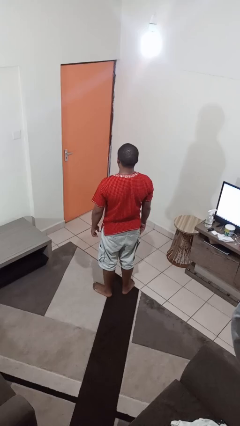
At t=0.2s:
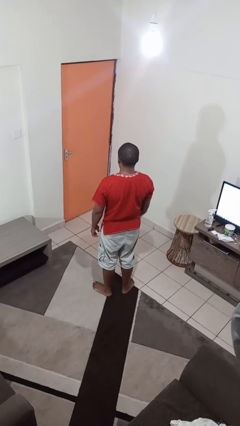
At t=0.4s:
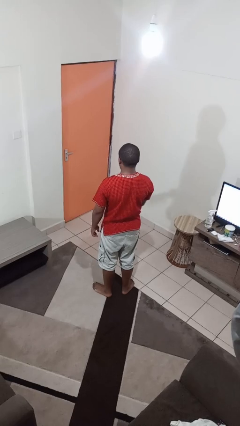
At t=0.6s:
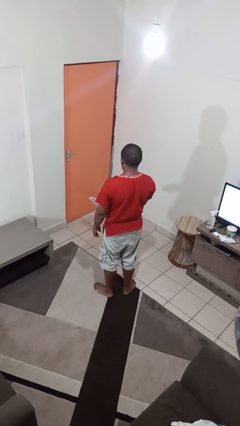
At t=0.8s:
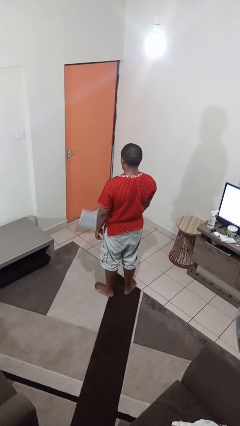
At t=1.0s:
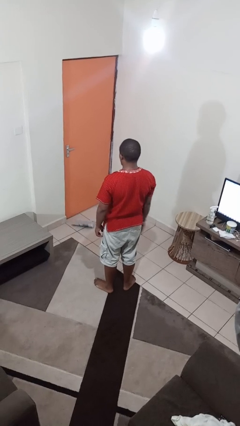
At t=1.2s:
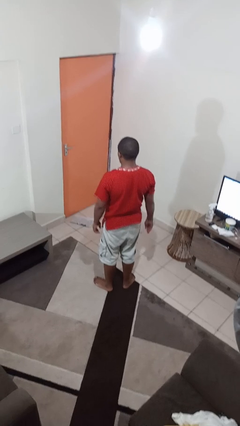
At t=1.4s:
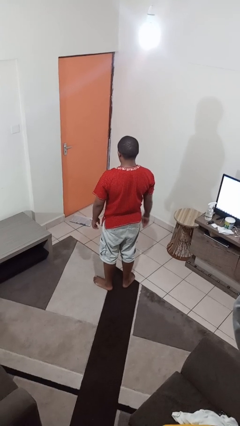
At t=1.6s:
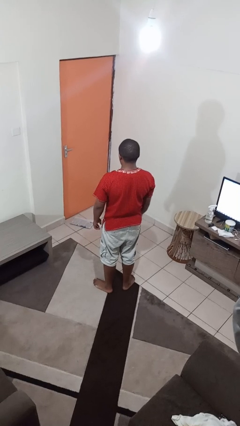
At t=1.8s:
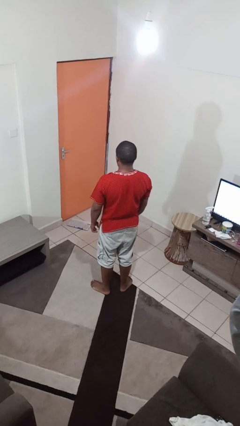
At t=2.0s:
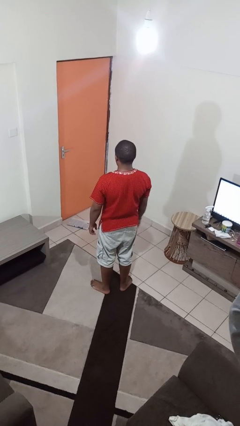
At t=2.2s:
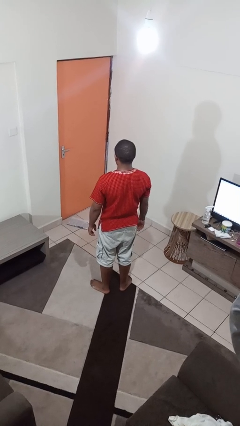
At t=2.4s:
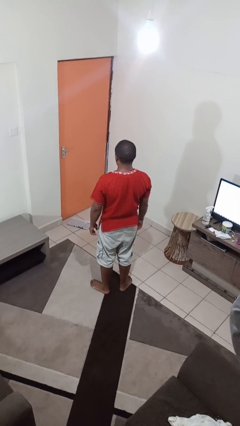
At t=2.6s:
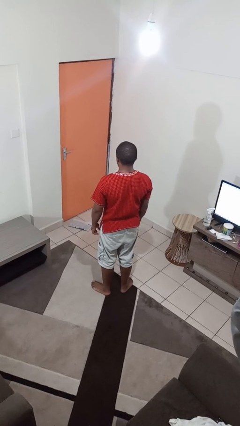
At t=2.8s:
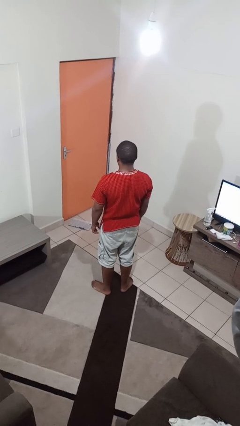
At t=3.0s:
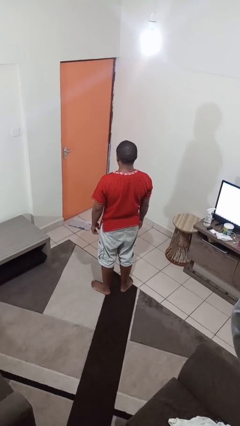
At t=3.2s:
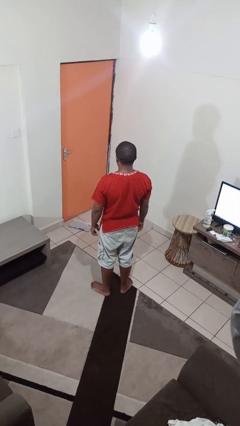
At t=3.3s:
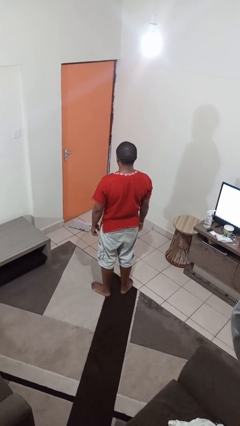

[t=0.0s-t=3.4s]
person throws object to ground

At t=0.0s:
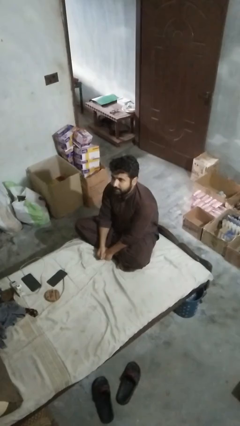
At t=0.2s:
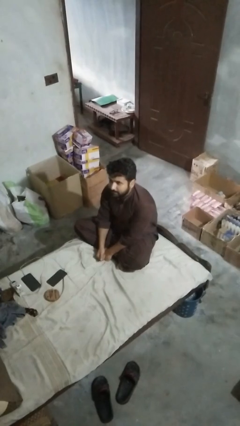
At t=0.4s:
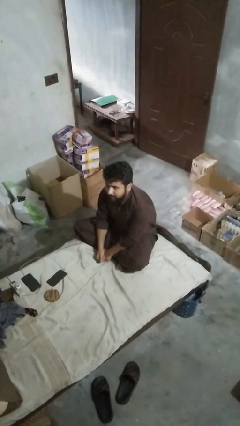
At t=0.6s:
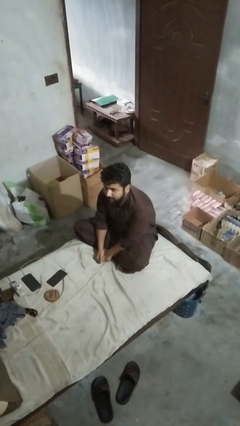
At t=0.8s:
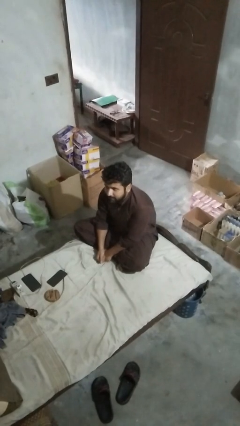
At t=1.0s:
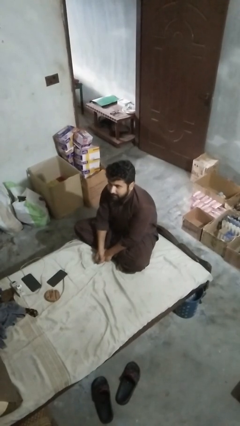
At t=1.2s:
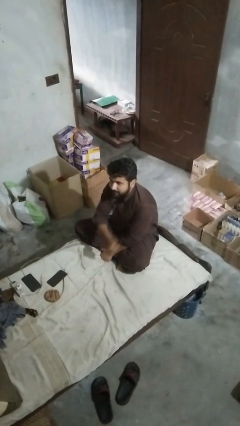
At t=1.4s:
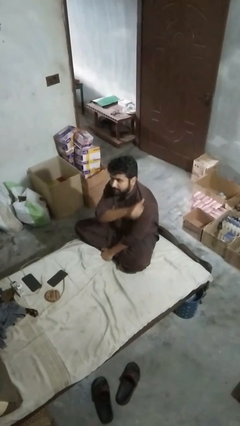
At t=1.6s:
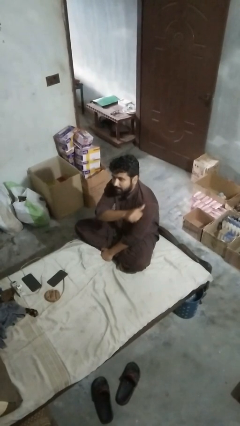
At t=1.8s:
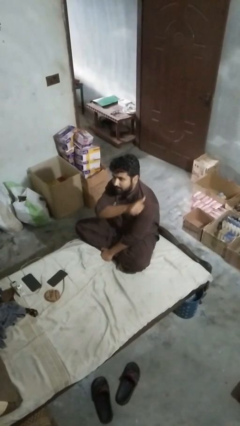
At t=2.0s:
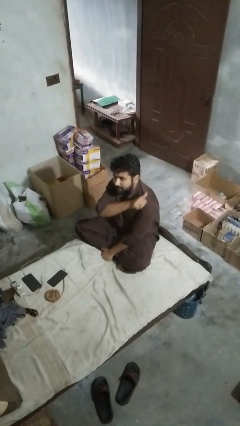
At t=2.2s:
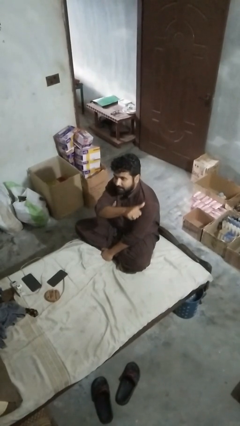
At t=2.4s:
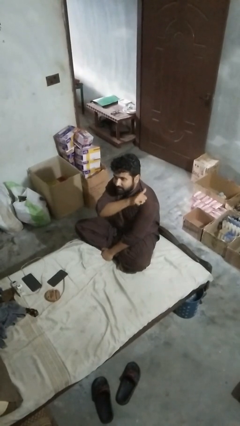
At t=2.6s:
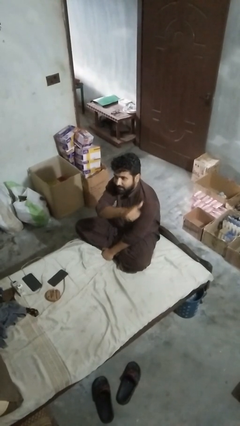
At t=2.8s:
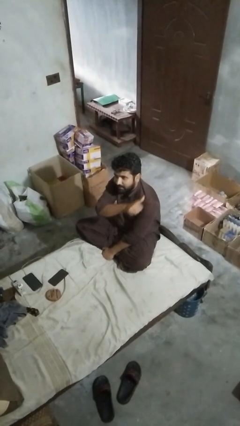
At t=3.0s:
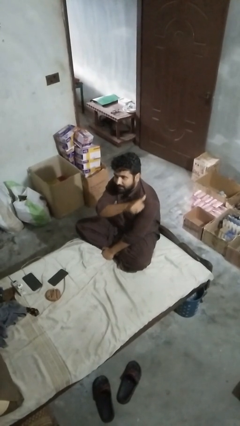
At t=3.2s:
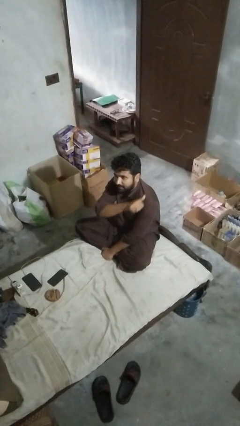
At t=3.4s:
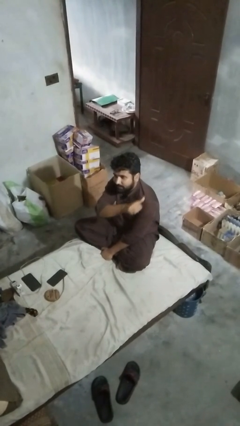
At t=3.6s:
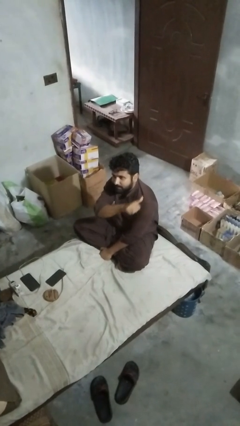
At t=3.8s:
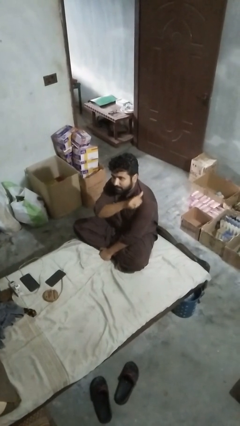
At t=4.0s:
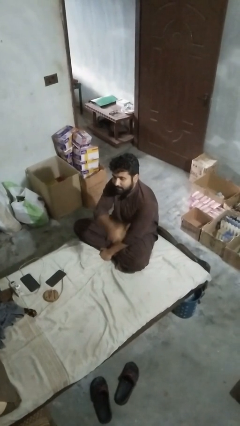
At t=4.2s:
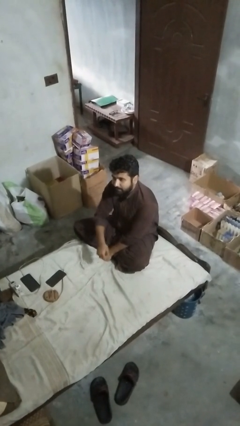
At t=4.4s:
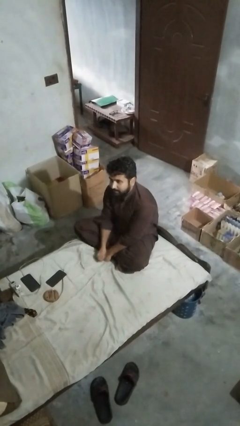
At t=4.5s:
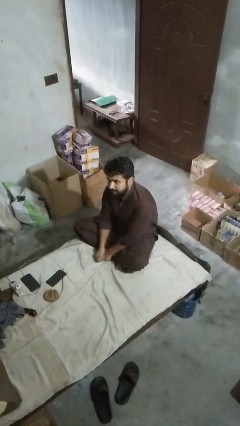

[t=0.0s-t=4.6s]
person gestures behind me

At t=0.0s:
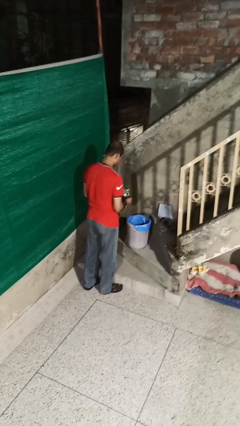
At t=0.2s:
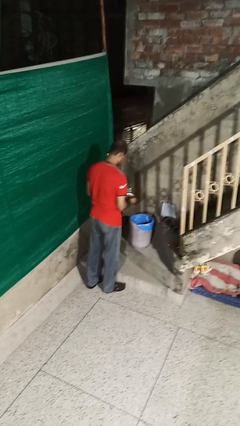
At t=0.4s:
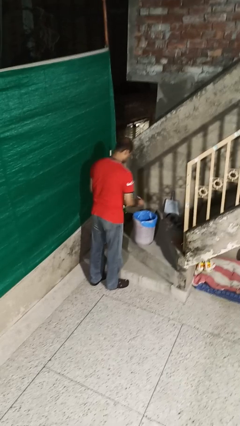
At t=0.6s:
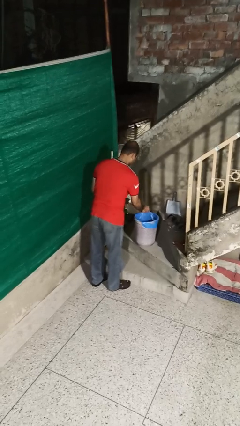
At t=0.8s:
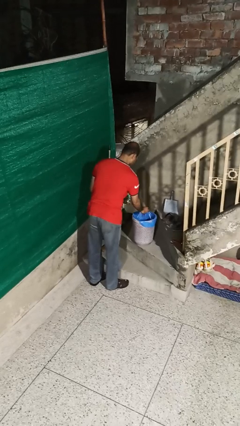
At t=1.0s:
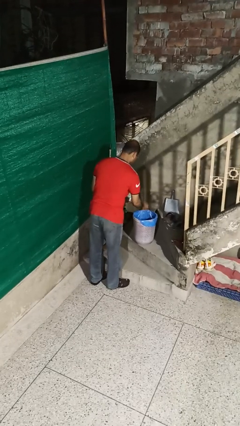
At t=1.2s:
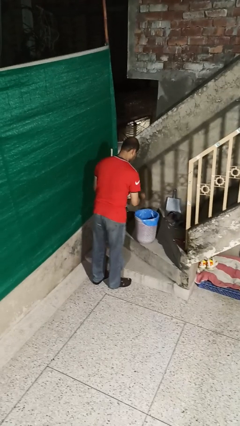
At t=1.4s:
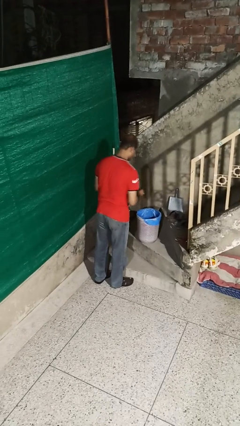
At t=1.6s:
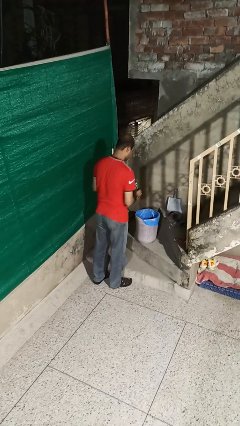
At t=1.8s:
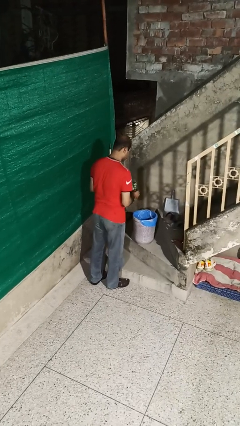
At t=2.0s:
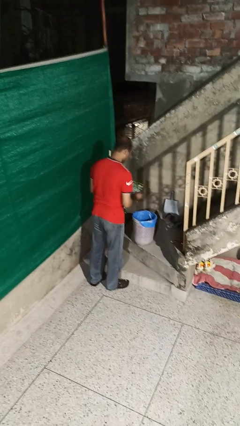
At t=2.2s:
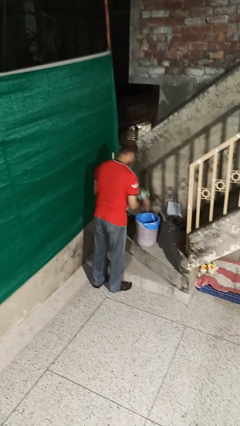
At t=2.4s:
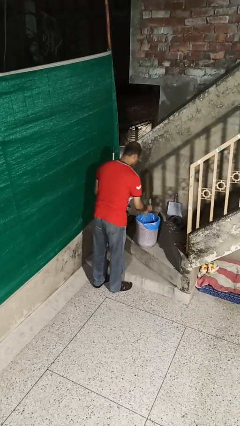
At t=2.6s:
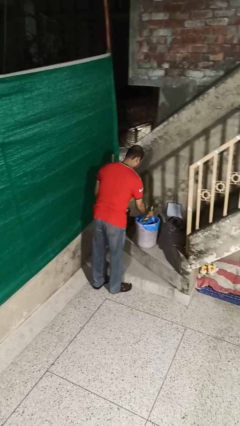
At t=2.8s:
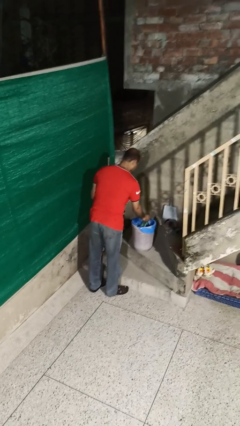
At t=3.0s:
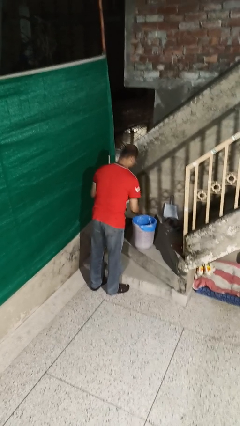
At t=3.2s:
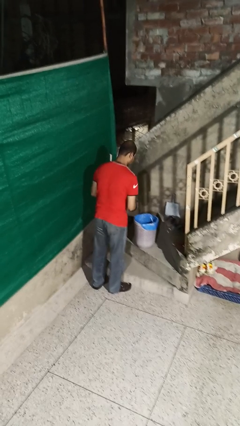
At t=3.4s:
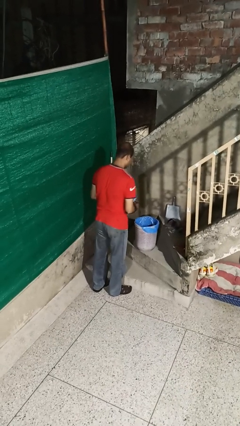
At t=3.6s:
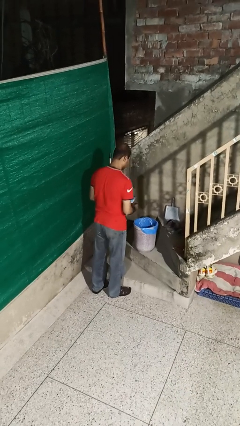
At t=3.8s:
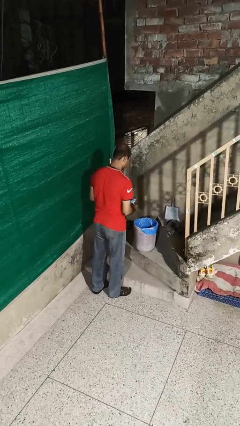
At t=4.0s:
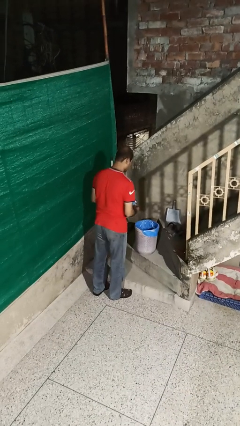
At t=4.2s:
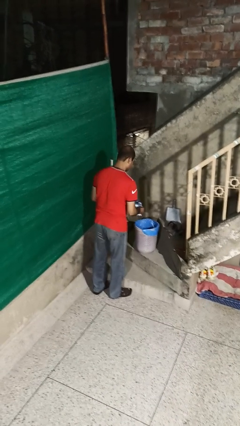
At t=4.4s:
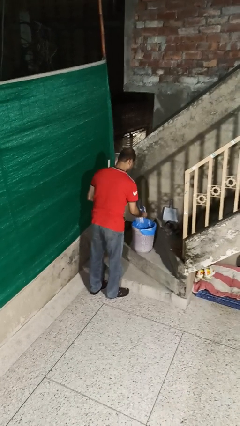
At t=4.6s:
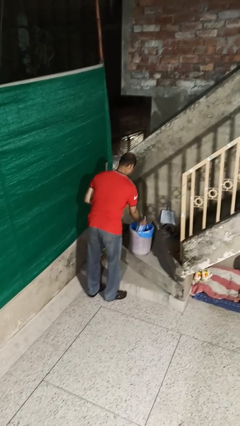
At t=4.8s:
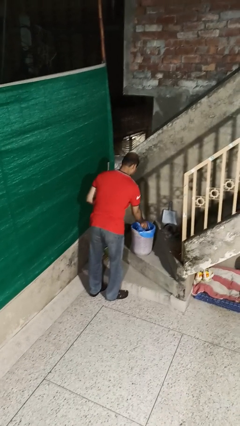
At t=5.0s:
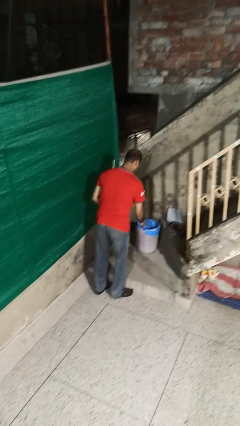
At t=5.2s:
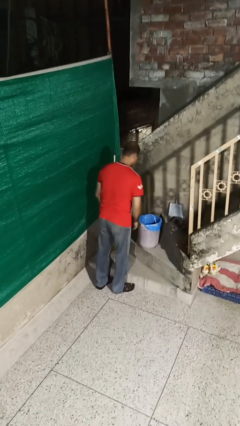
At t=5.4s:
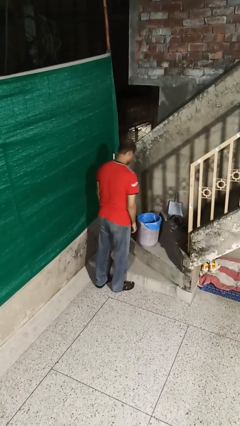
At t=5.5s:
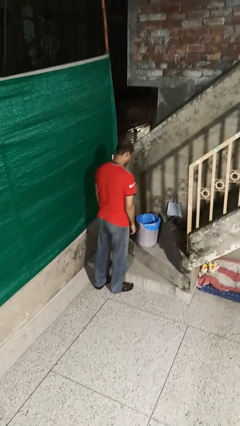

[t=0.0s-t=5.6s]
person discards trash

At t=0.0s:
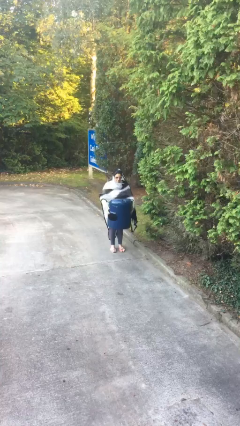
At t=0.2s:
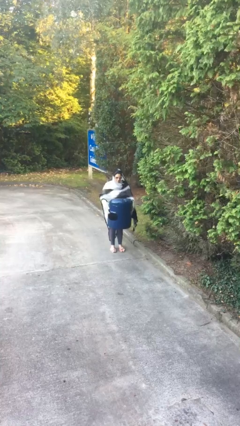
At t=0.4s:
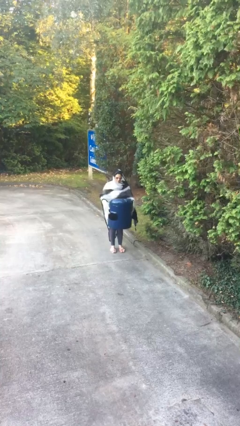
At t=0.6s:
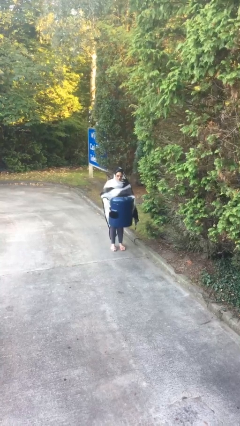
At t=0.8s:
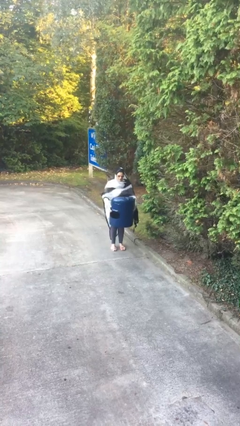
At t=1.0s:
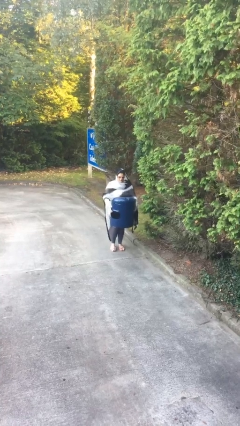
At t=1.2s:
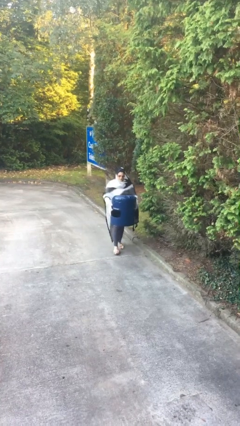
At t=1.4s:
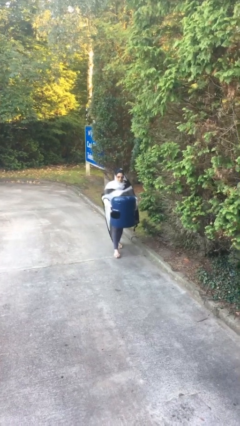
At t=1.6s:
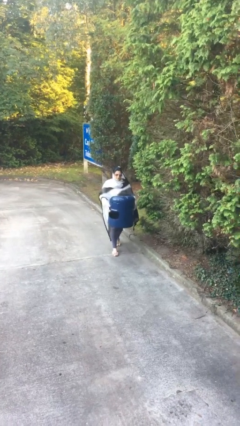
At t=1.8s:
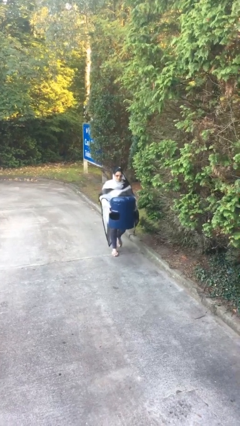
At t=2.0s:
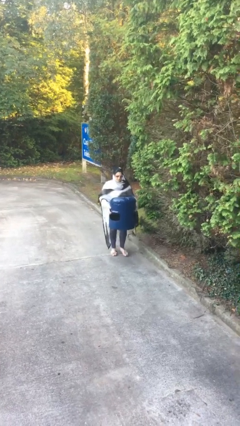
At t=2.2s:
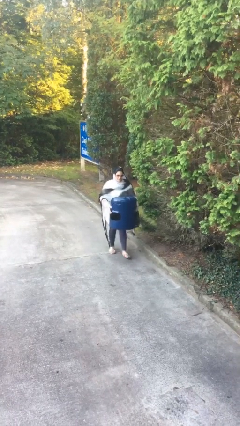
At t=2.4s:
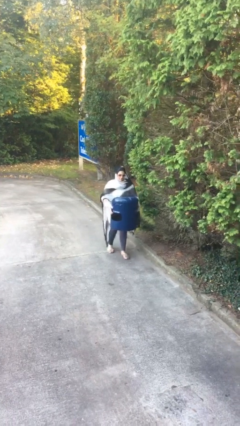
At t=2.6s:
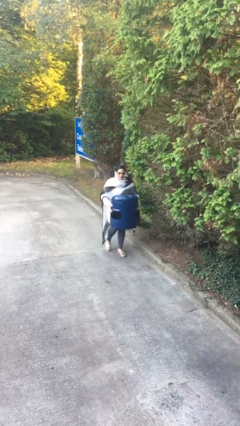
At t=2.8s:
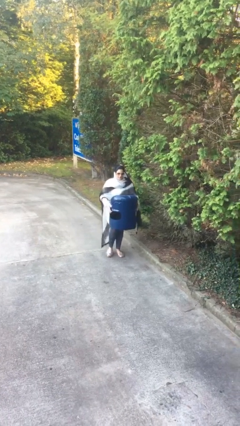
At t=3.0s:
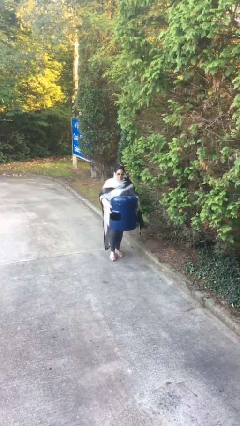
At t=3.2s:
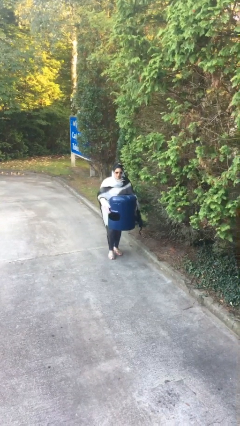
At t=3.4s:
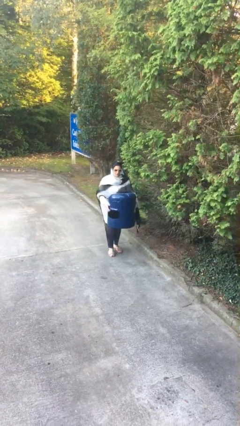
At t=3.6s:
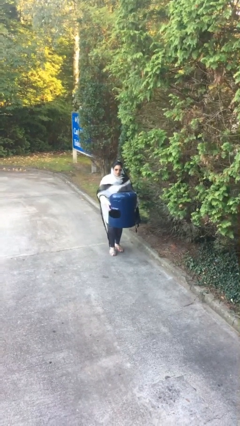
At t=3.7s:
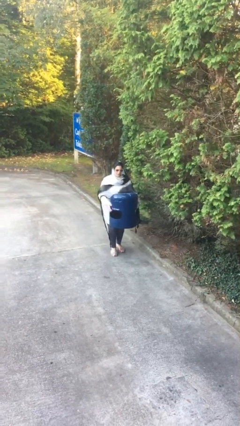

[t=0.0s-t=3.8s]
person carries heavy object

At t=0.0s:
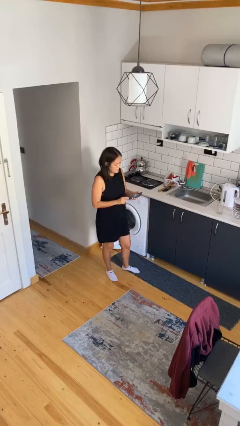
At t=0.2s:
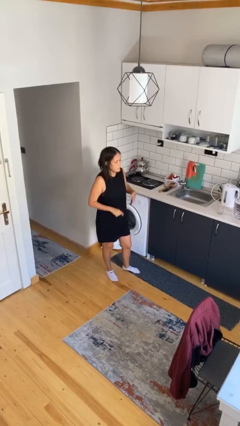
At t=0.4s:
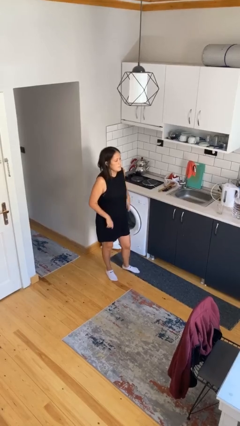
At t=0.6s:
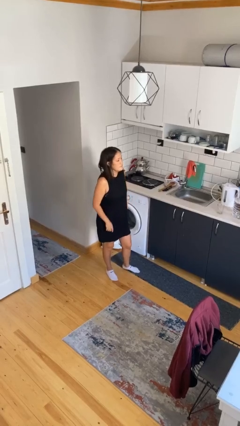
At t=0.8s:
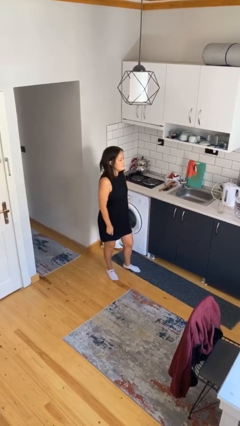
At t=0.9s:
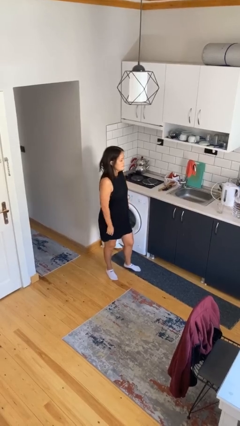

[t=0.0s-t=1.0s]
person puts phone into pocket
